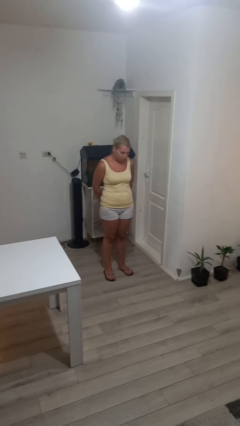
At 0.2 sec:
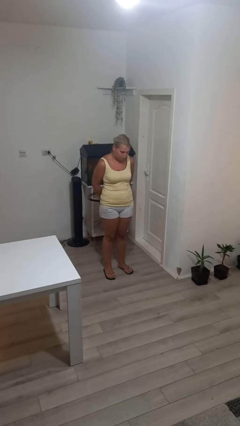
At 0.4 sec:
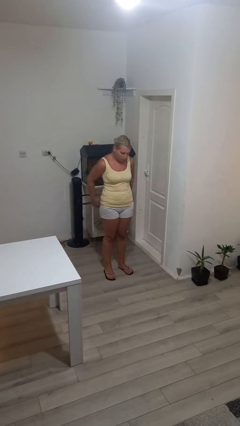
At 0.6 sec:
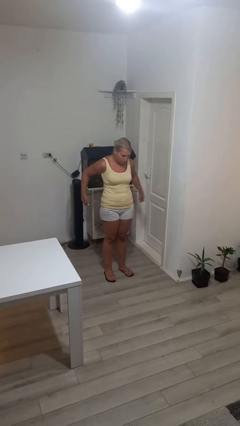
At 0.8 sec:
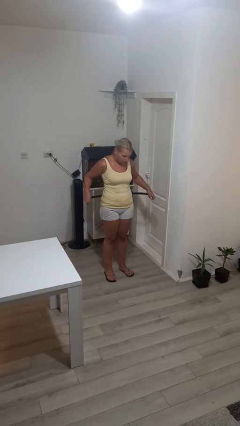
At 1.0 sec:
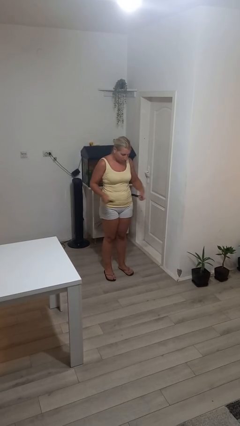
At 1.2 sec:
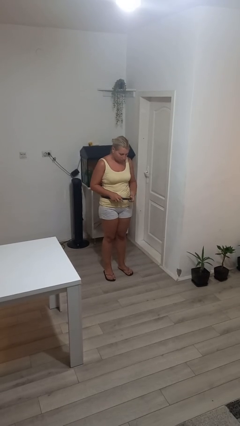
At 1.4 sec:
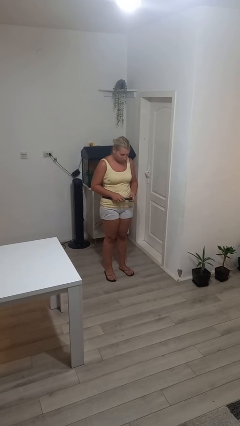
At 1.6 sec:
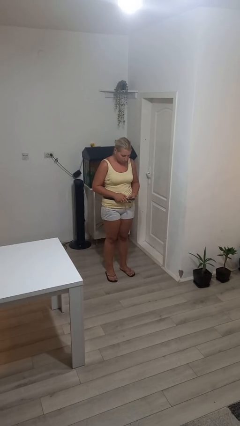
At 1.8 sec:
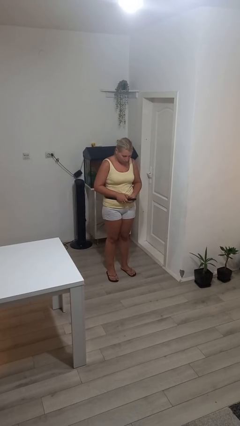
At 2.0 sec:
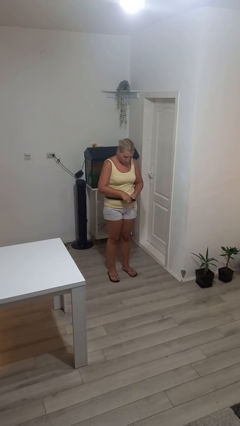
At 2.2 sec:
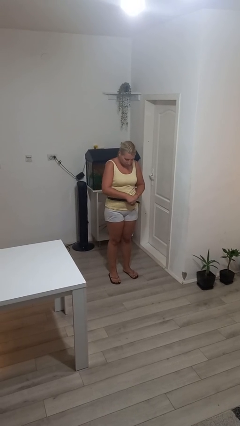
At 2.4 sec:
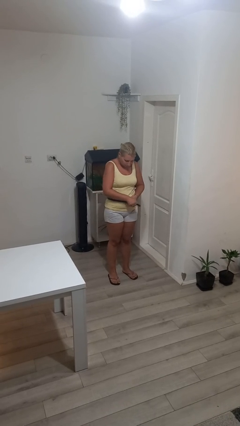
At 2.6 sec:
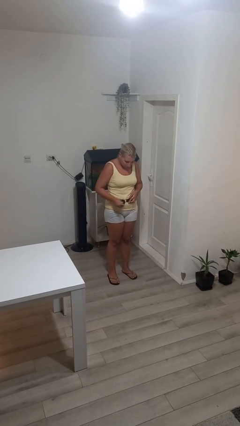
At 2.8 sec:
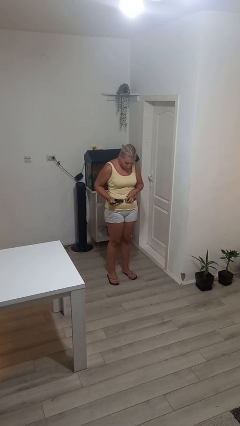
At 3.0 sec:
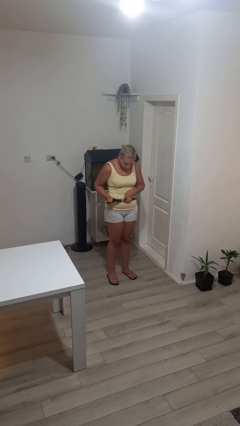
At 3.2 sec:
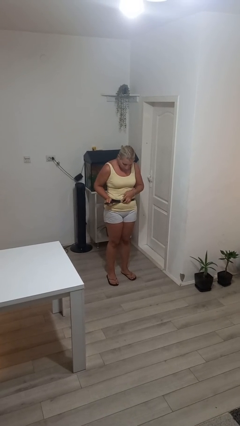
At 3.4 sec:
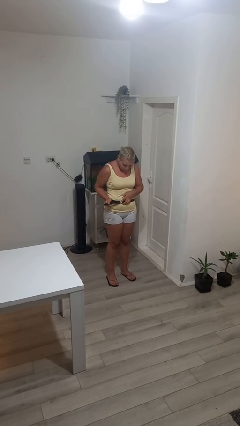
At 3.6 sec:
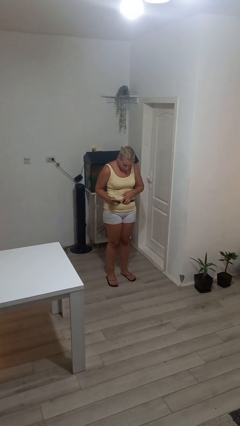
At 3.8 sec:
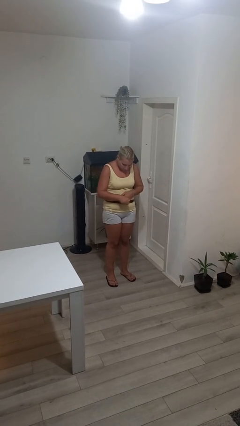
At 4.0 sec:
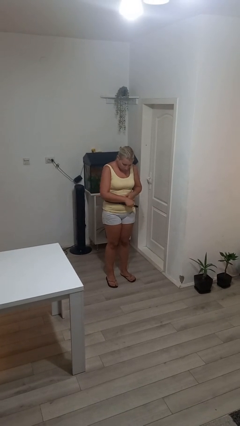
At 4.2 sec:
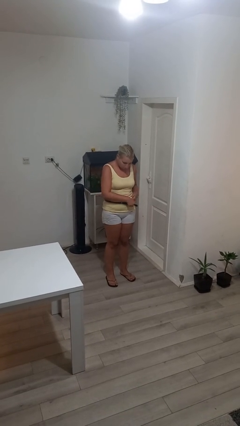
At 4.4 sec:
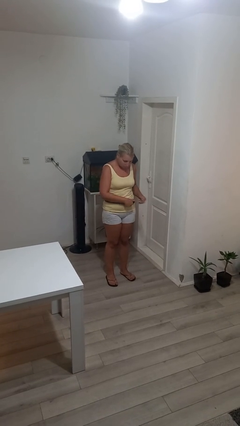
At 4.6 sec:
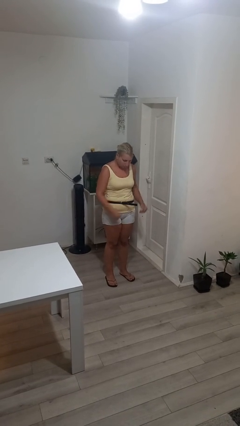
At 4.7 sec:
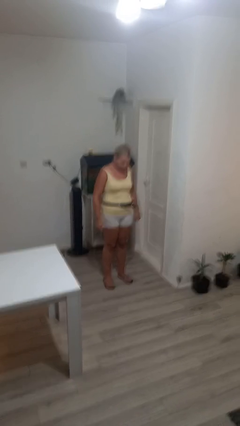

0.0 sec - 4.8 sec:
person puts on belt

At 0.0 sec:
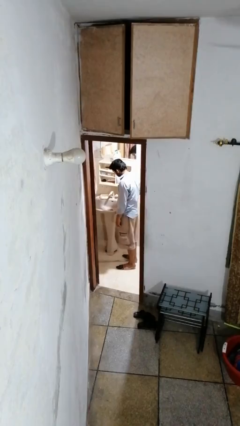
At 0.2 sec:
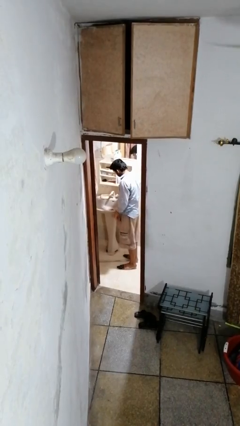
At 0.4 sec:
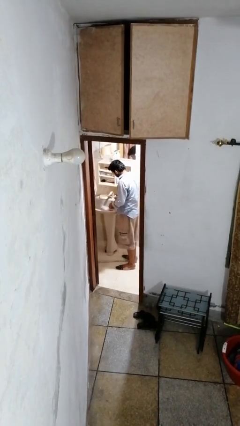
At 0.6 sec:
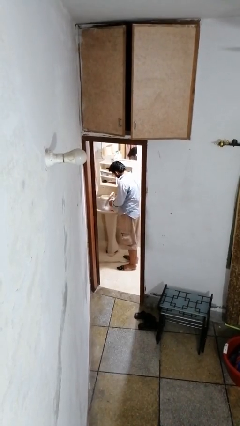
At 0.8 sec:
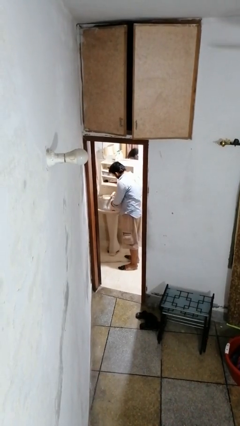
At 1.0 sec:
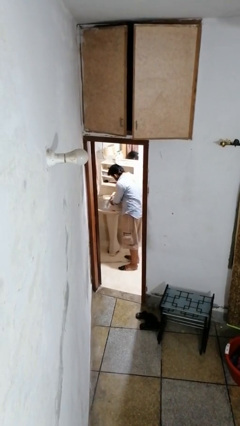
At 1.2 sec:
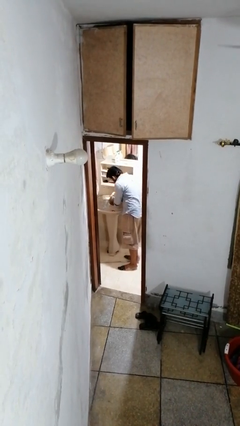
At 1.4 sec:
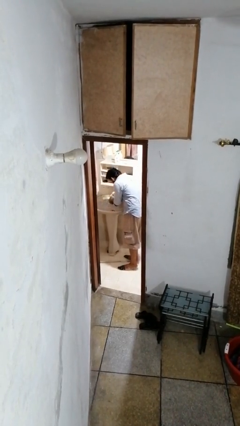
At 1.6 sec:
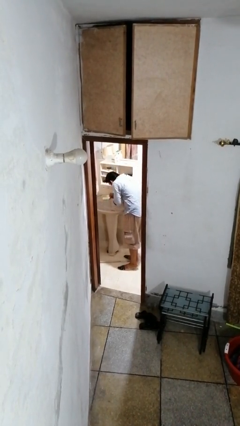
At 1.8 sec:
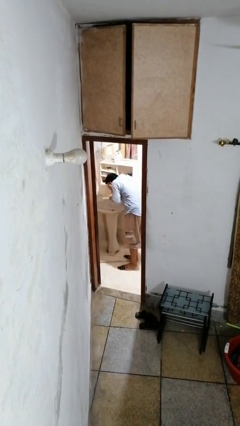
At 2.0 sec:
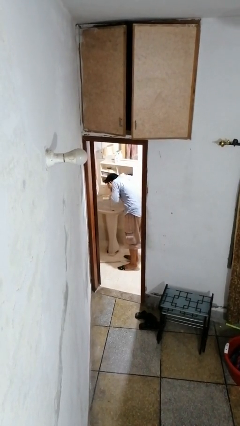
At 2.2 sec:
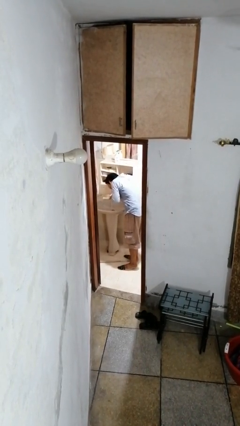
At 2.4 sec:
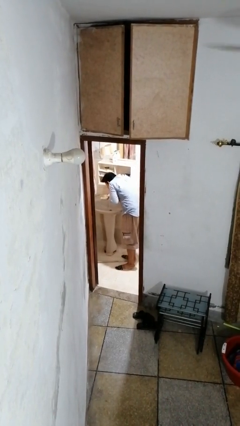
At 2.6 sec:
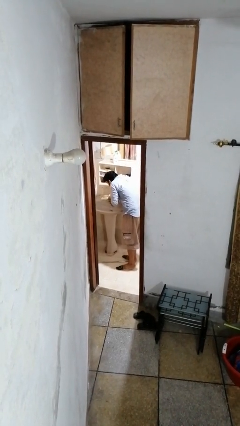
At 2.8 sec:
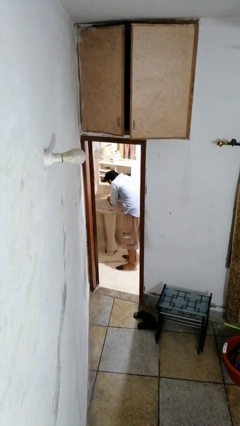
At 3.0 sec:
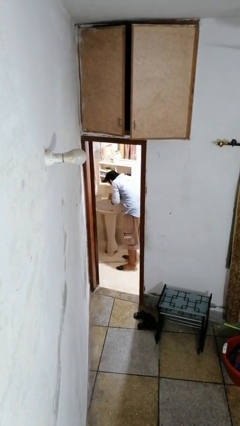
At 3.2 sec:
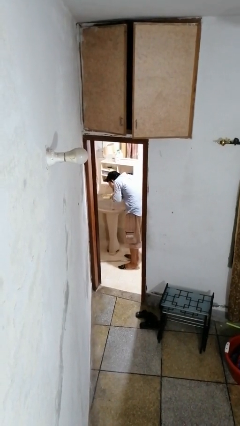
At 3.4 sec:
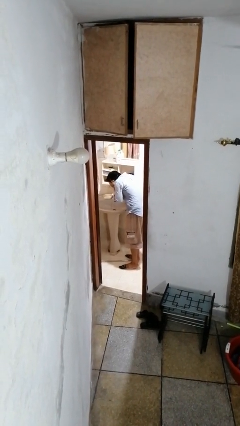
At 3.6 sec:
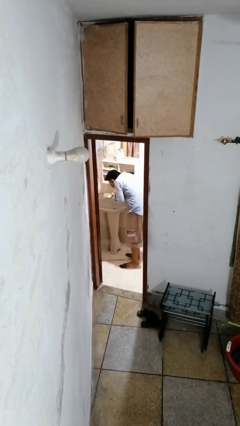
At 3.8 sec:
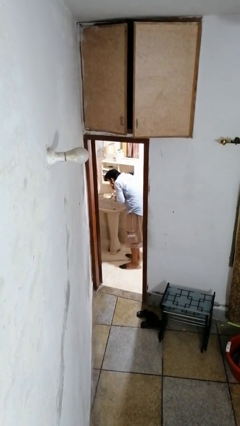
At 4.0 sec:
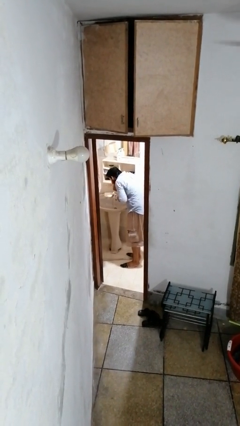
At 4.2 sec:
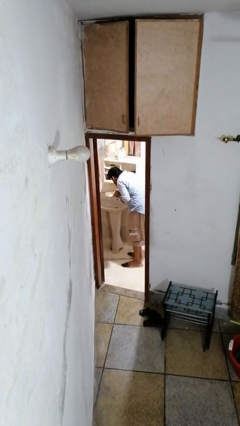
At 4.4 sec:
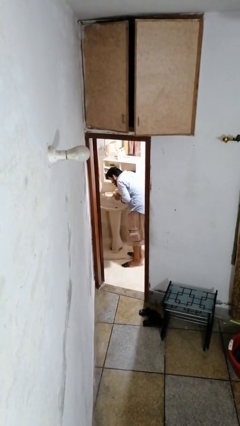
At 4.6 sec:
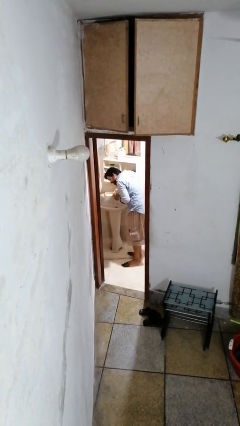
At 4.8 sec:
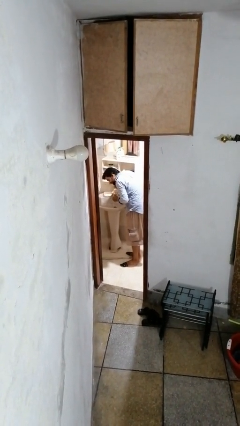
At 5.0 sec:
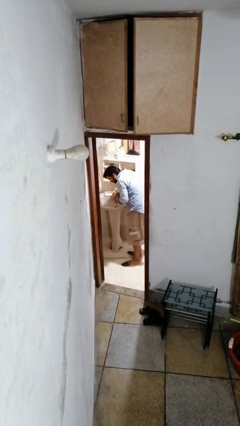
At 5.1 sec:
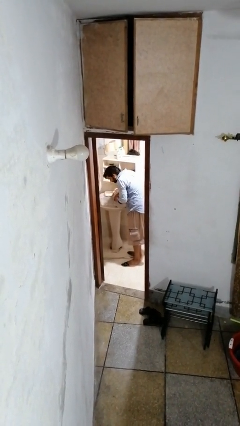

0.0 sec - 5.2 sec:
person washes face

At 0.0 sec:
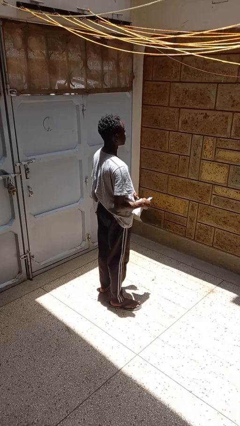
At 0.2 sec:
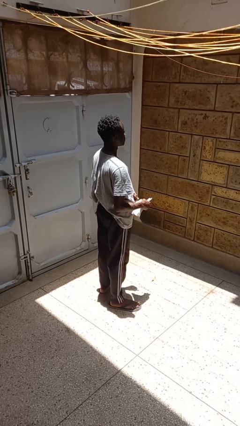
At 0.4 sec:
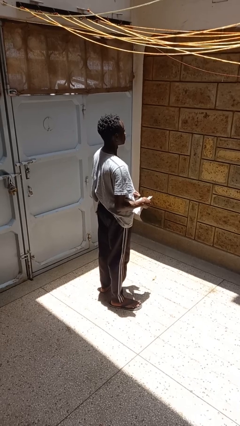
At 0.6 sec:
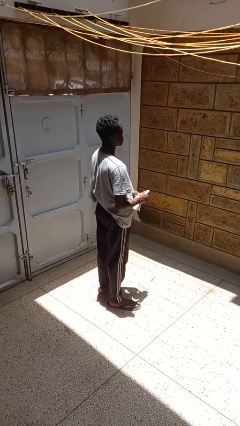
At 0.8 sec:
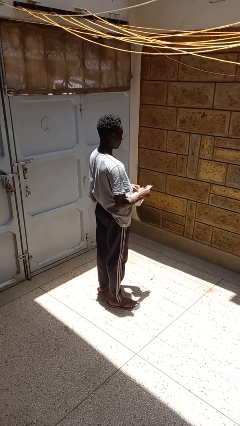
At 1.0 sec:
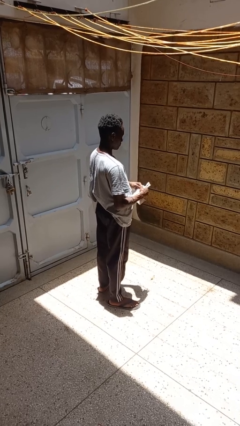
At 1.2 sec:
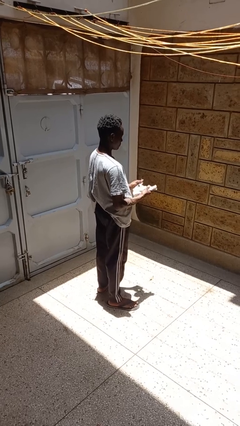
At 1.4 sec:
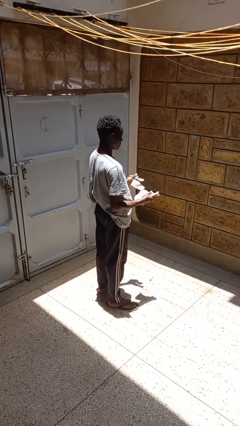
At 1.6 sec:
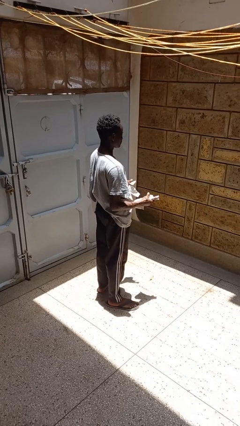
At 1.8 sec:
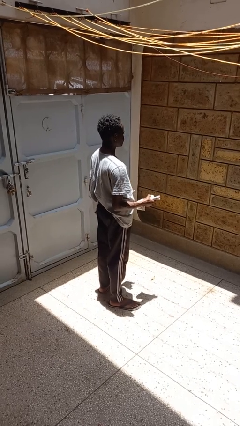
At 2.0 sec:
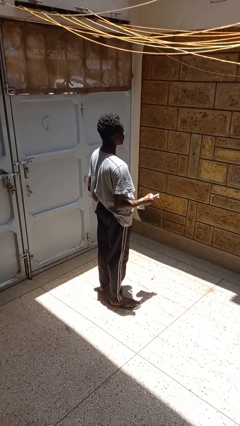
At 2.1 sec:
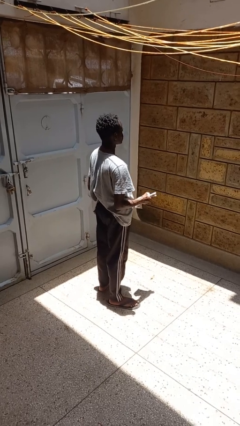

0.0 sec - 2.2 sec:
person tears paper

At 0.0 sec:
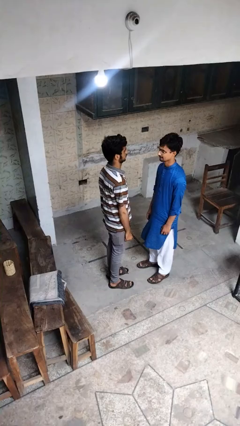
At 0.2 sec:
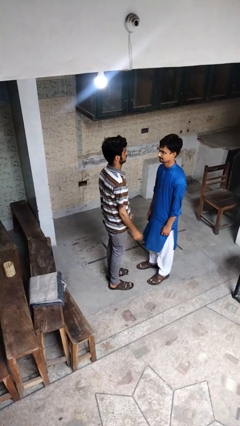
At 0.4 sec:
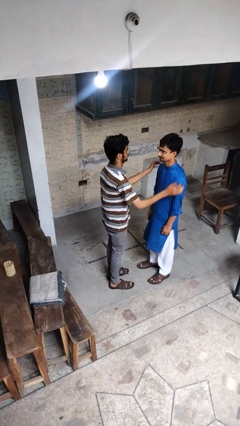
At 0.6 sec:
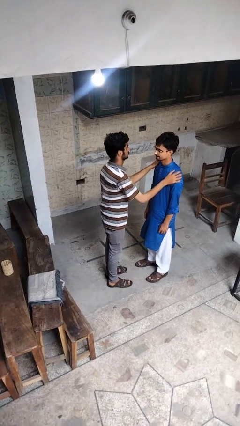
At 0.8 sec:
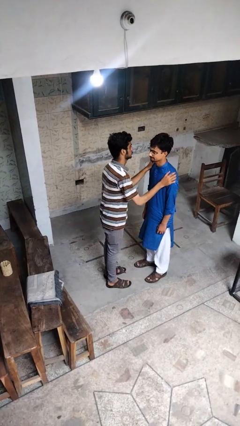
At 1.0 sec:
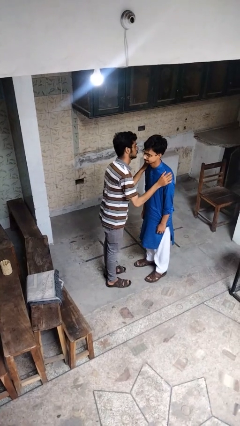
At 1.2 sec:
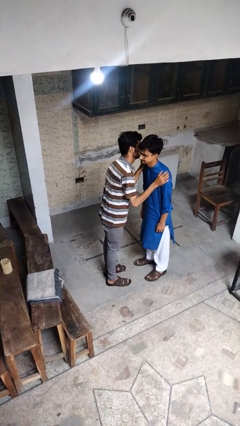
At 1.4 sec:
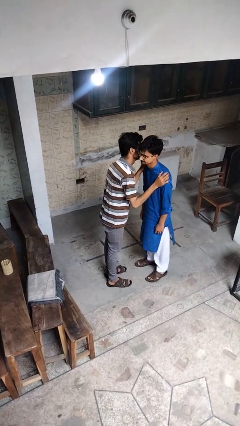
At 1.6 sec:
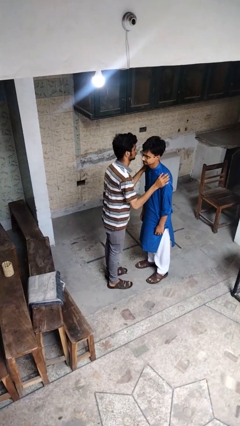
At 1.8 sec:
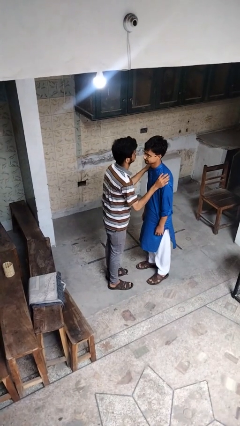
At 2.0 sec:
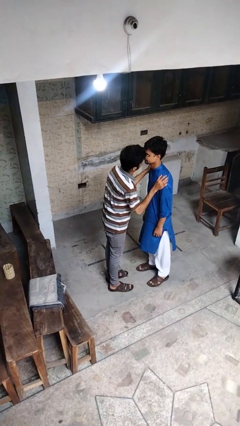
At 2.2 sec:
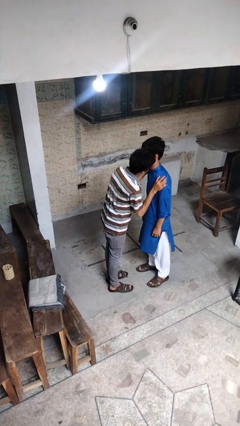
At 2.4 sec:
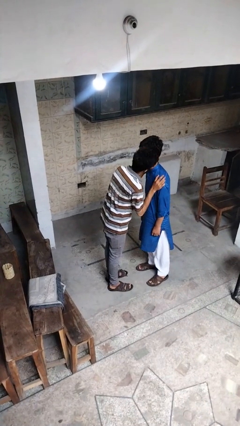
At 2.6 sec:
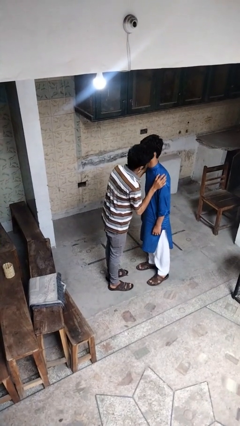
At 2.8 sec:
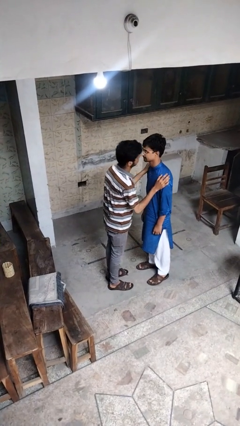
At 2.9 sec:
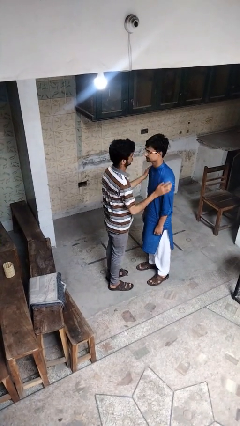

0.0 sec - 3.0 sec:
person kisses cheek of person

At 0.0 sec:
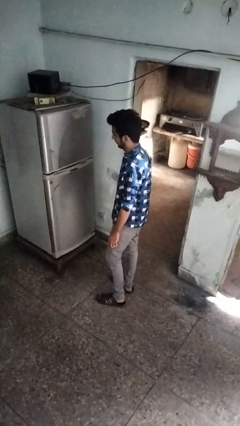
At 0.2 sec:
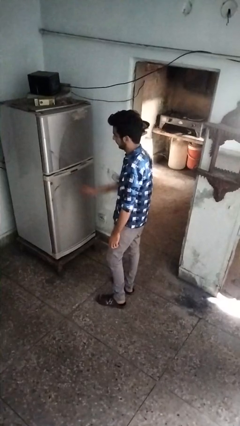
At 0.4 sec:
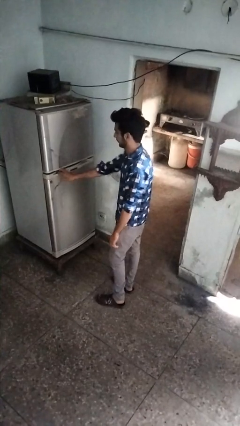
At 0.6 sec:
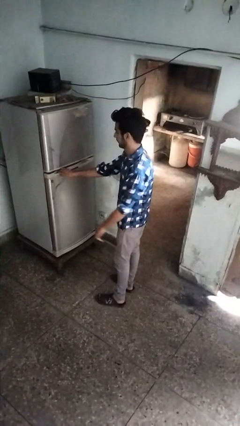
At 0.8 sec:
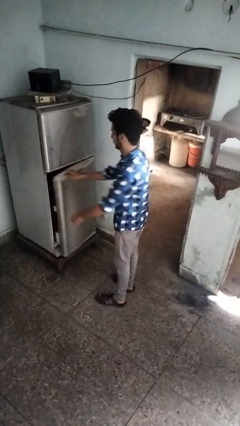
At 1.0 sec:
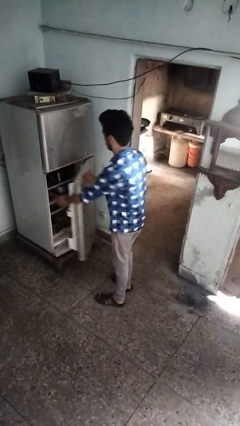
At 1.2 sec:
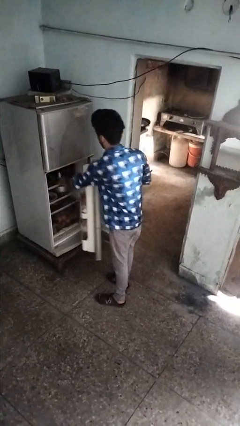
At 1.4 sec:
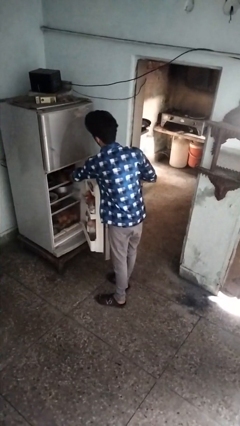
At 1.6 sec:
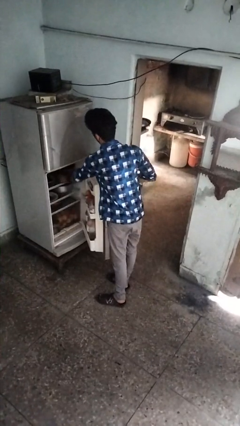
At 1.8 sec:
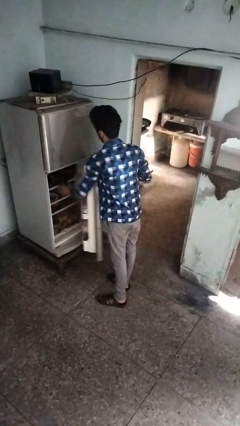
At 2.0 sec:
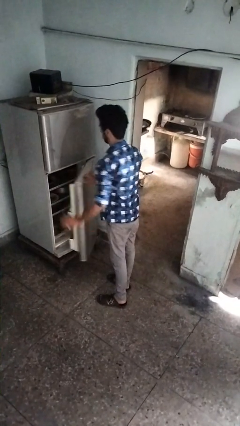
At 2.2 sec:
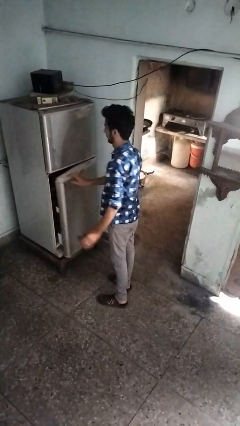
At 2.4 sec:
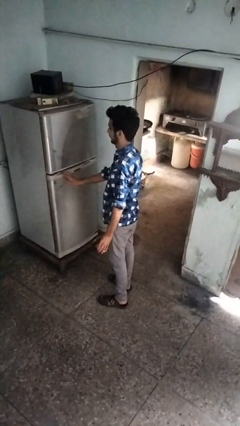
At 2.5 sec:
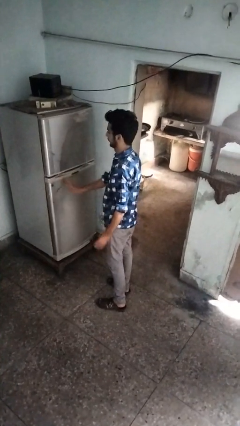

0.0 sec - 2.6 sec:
person takes object from refrigerator
